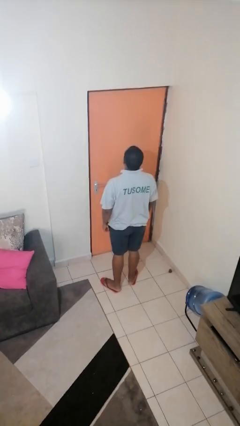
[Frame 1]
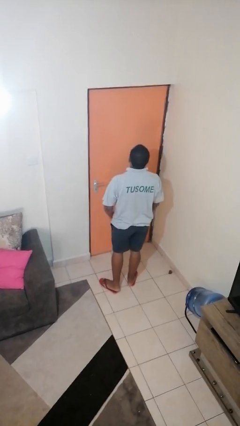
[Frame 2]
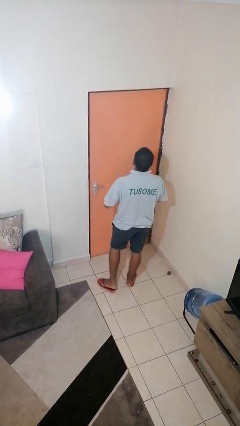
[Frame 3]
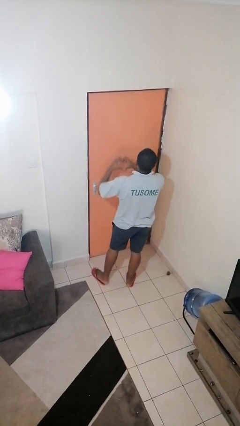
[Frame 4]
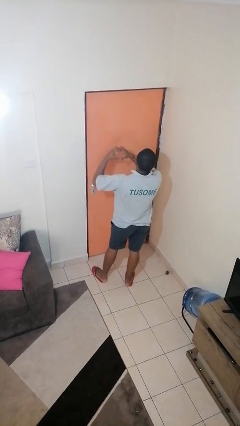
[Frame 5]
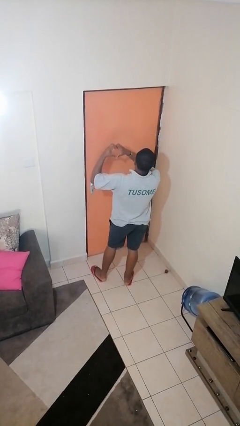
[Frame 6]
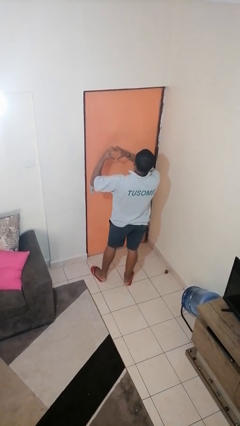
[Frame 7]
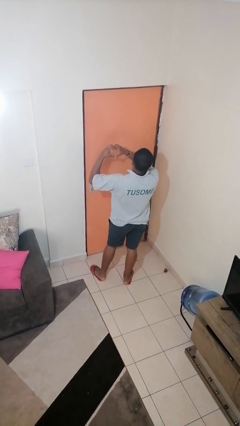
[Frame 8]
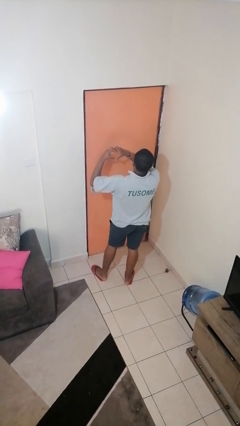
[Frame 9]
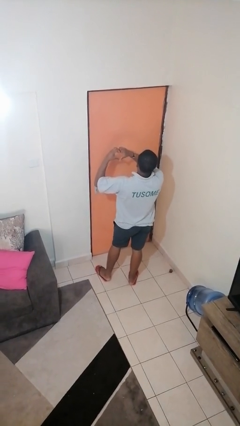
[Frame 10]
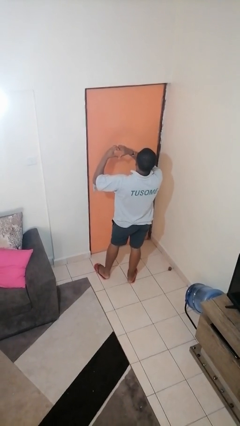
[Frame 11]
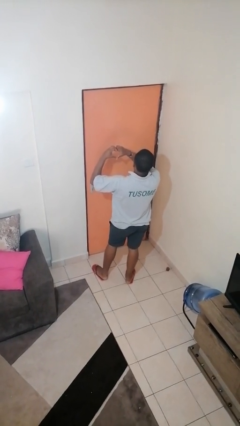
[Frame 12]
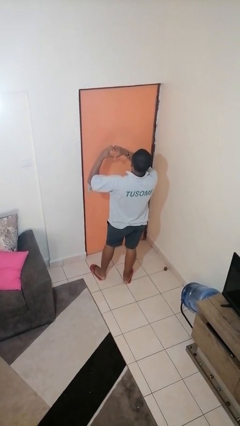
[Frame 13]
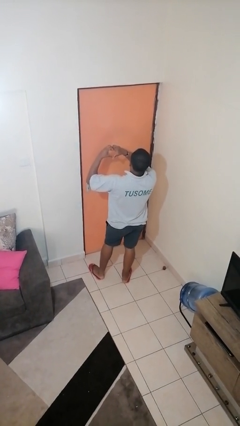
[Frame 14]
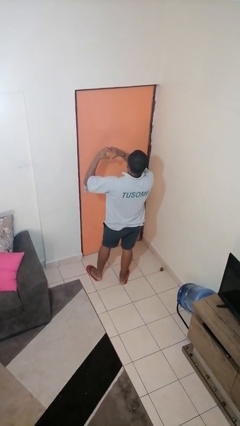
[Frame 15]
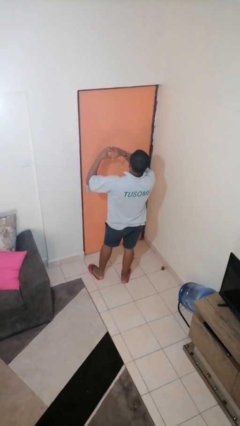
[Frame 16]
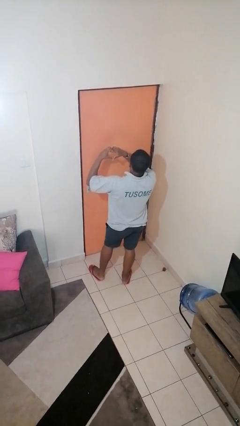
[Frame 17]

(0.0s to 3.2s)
person gestures heart

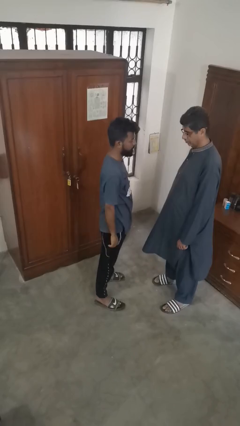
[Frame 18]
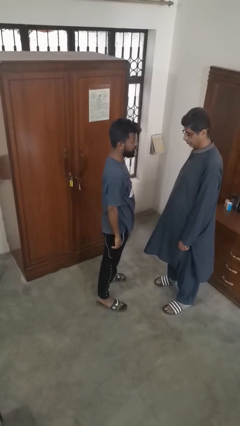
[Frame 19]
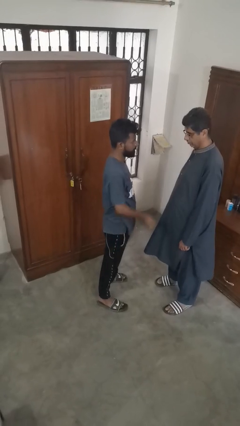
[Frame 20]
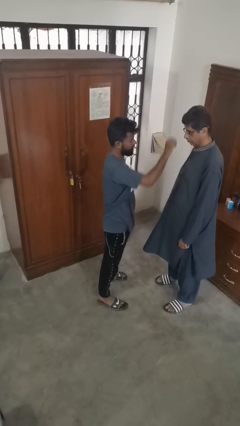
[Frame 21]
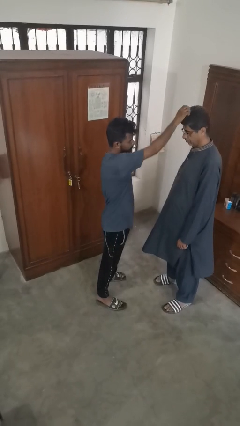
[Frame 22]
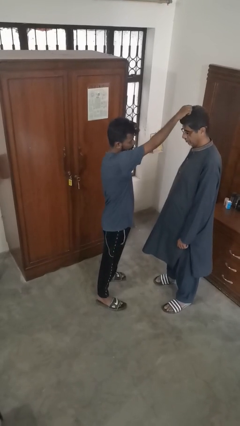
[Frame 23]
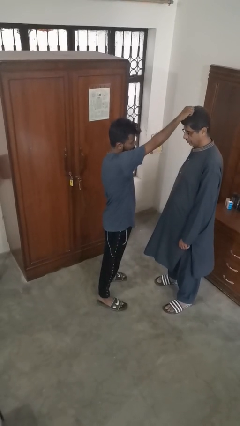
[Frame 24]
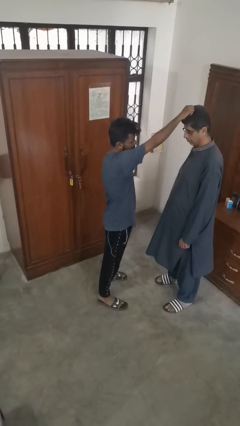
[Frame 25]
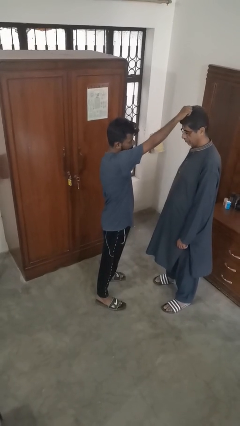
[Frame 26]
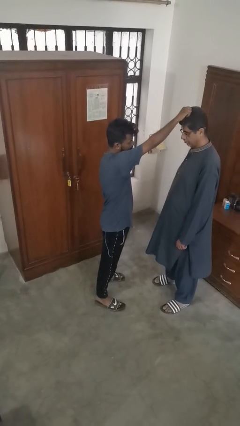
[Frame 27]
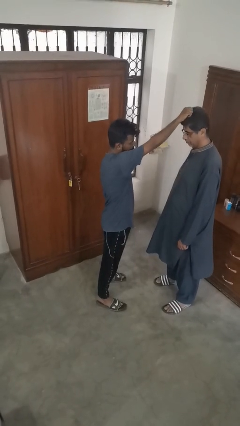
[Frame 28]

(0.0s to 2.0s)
person grabs person by hair

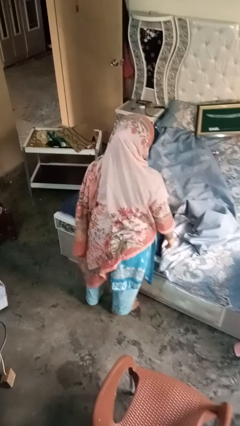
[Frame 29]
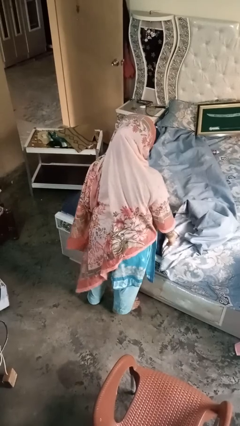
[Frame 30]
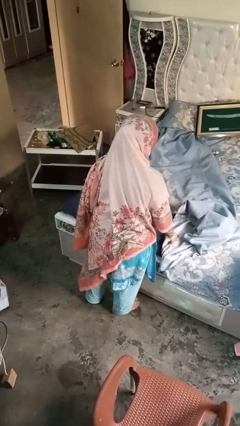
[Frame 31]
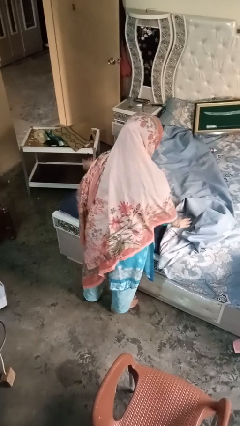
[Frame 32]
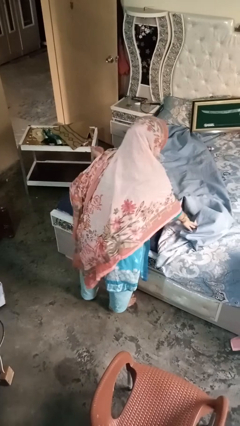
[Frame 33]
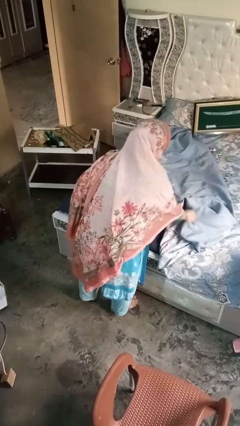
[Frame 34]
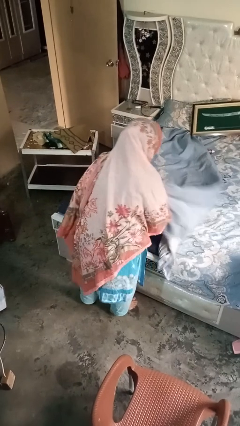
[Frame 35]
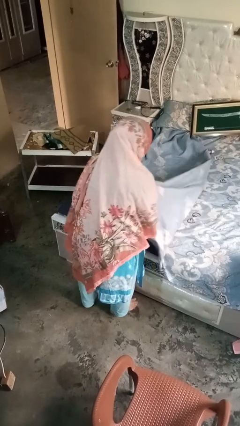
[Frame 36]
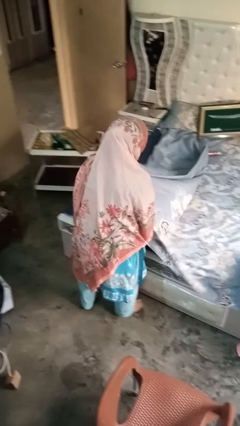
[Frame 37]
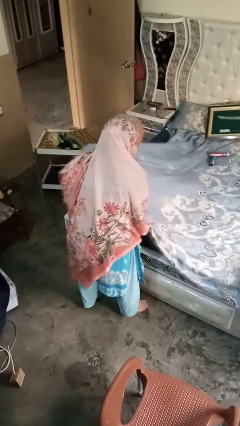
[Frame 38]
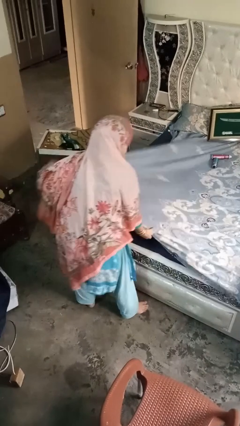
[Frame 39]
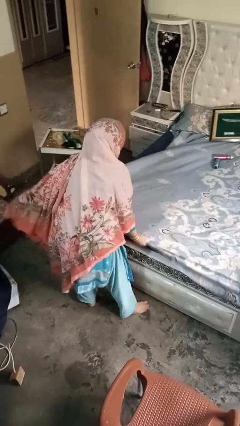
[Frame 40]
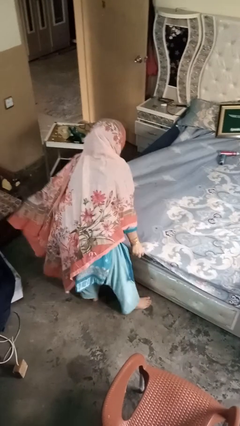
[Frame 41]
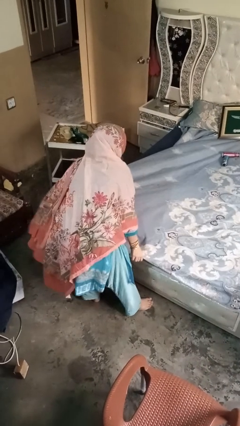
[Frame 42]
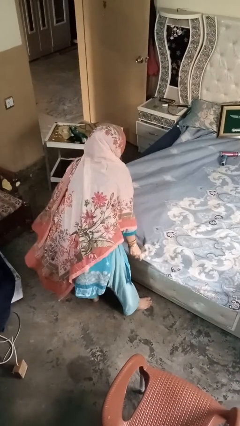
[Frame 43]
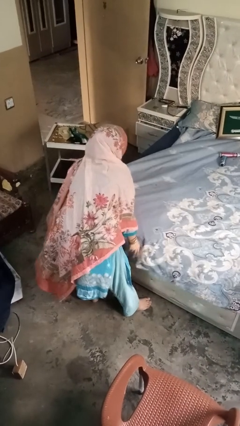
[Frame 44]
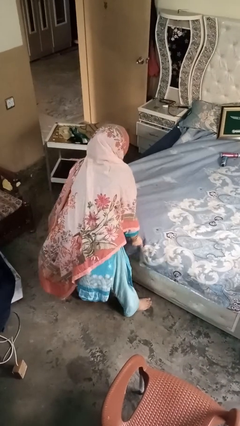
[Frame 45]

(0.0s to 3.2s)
person makes bed

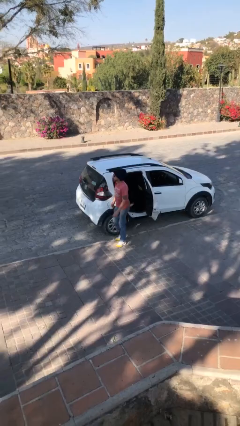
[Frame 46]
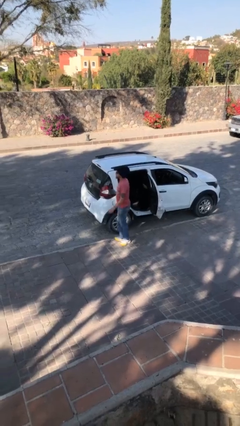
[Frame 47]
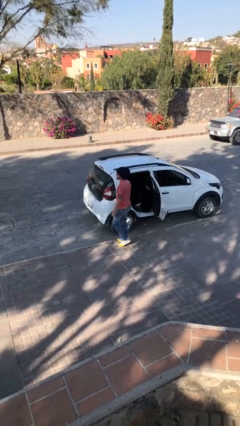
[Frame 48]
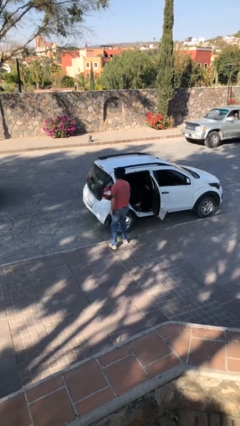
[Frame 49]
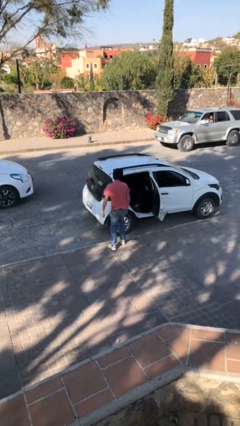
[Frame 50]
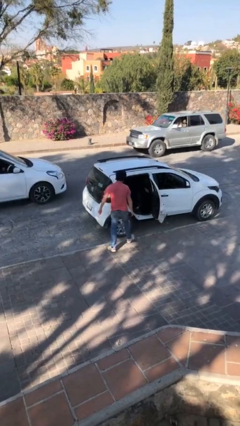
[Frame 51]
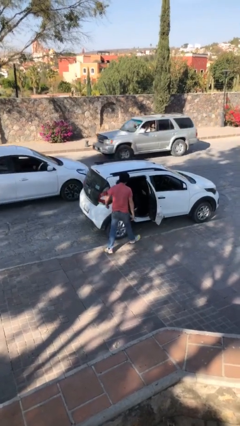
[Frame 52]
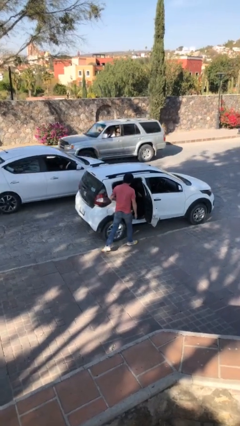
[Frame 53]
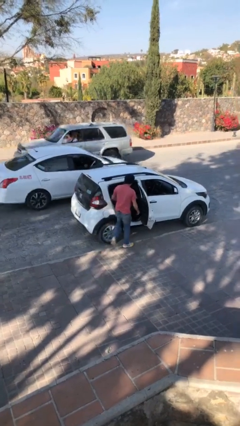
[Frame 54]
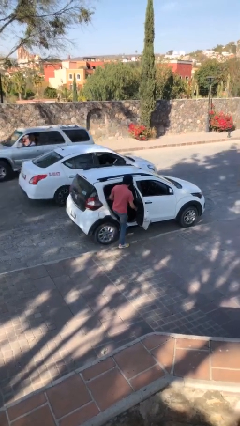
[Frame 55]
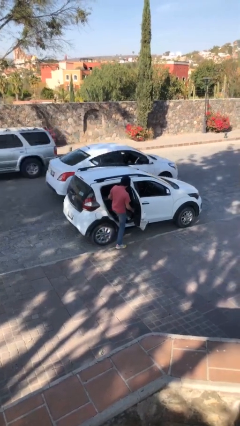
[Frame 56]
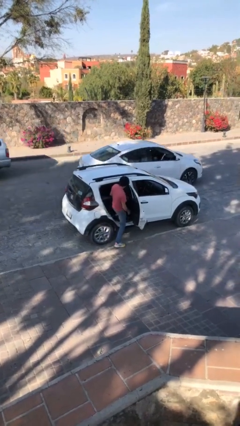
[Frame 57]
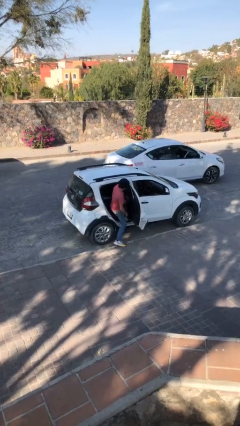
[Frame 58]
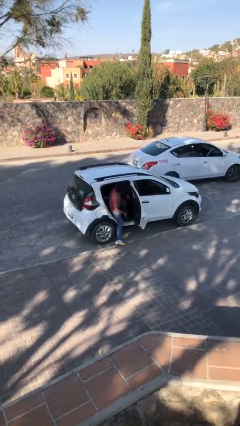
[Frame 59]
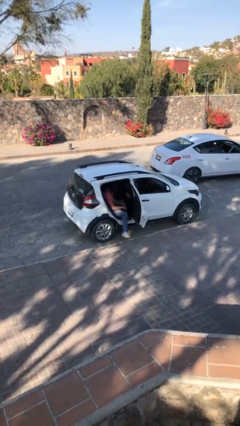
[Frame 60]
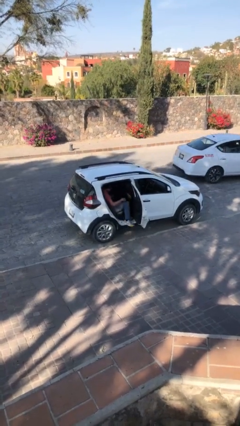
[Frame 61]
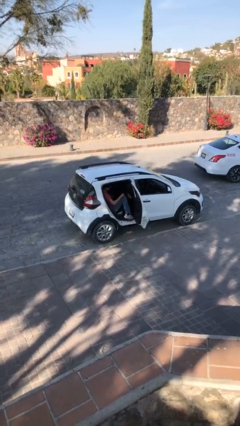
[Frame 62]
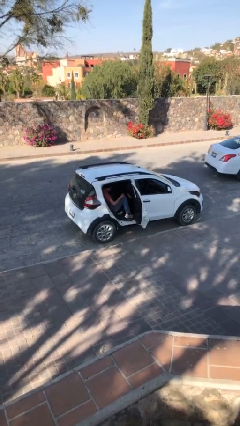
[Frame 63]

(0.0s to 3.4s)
person enters car

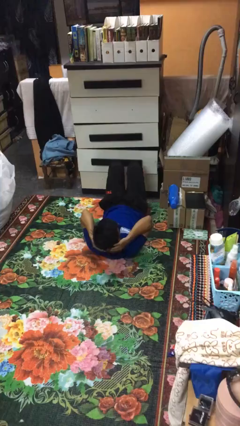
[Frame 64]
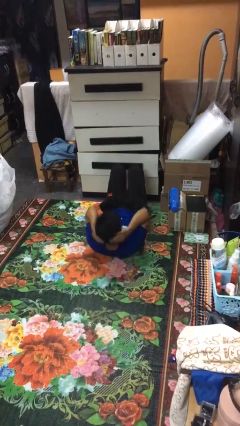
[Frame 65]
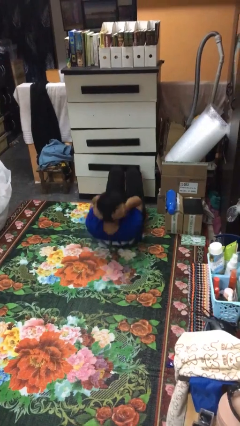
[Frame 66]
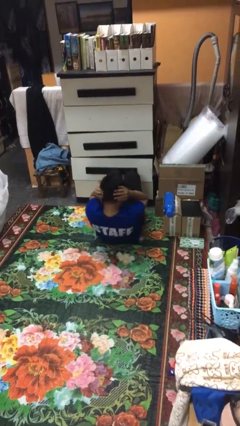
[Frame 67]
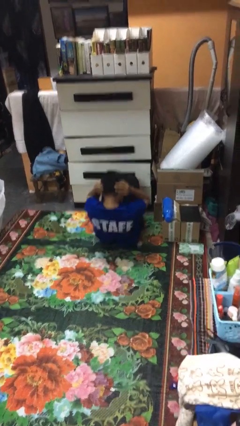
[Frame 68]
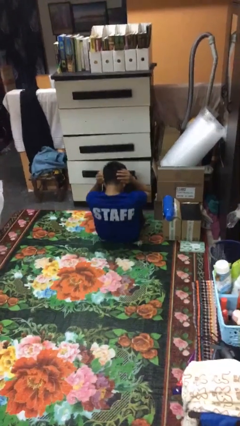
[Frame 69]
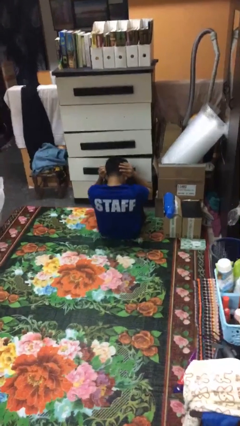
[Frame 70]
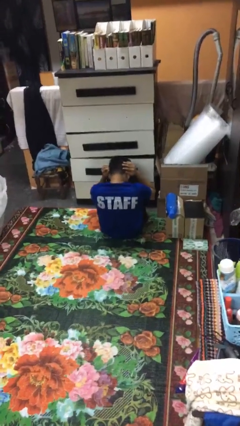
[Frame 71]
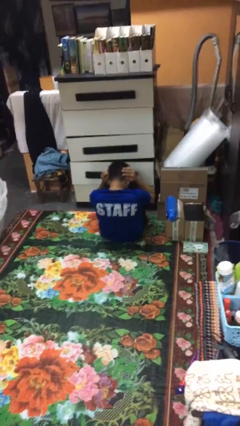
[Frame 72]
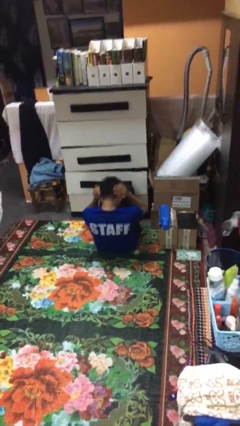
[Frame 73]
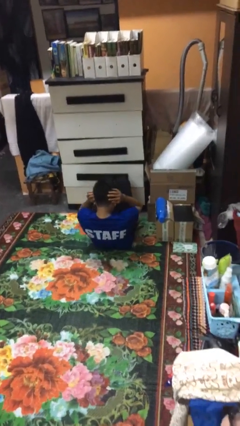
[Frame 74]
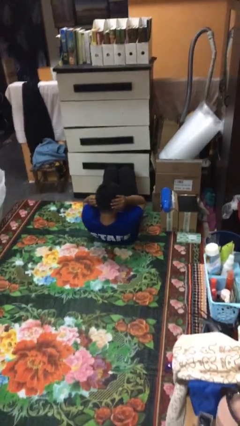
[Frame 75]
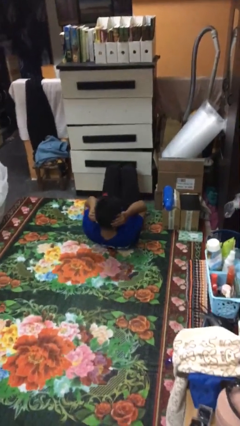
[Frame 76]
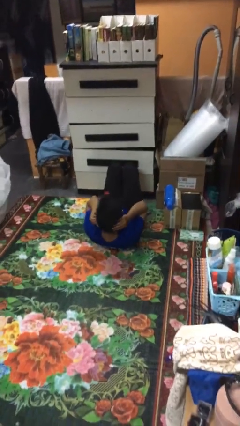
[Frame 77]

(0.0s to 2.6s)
person exercises with situp

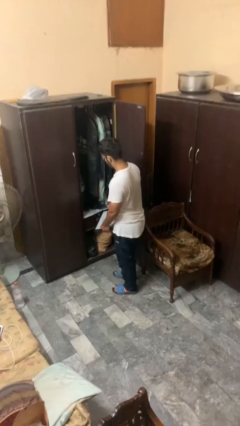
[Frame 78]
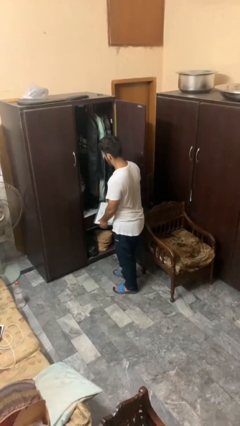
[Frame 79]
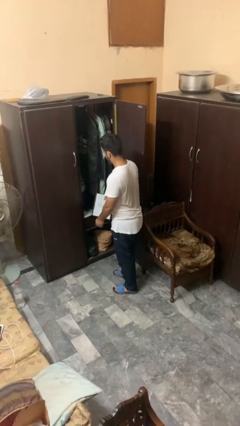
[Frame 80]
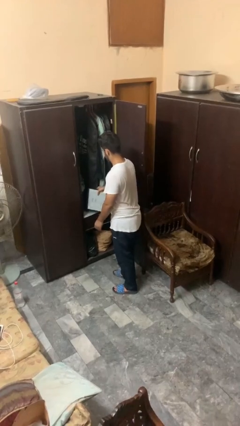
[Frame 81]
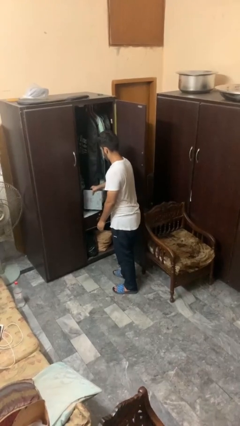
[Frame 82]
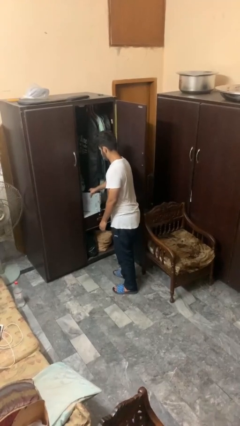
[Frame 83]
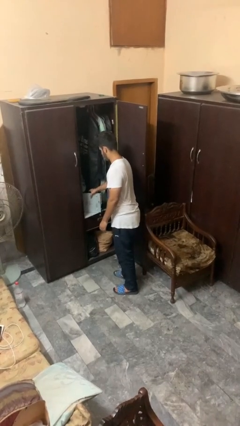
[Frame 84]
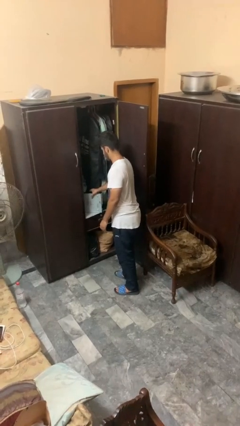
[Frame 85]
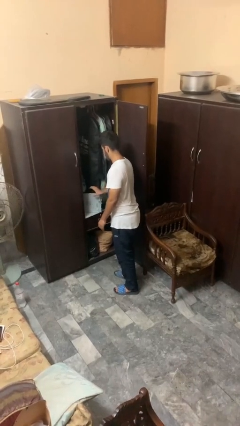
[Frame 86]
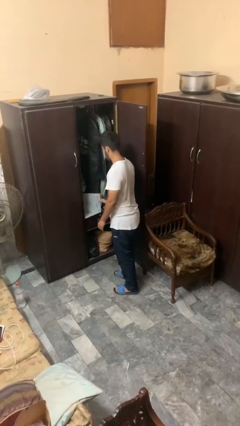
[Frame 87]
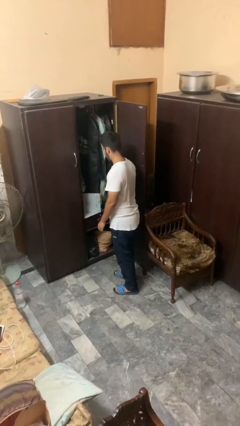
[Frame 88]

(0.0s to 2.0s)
person puts down object on countertop

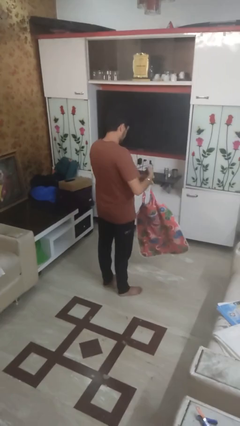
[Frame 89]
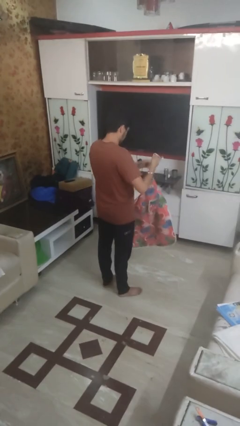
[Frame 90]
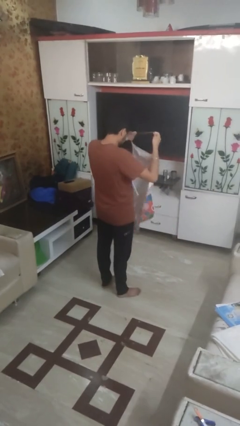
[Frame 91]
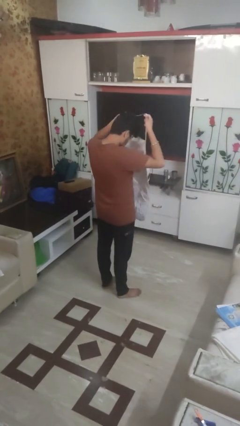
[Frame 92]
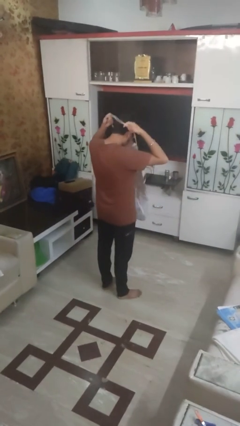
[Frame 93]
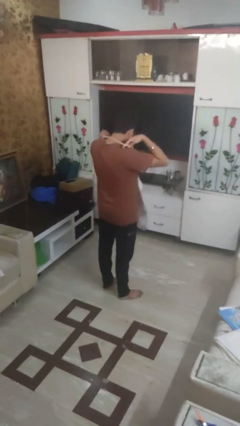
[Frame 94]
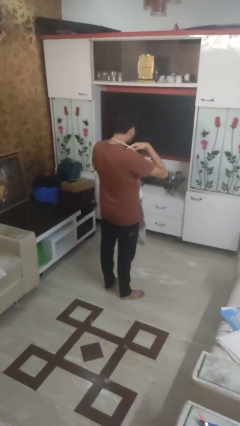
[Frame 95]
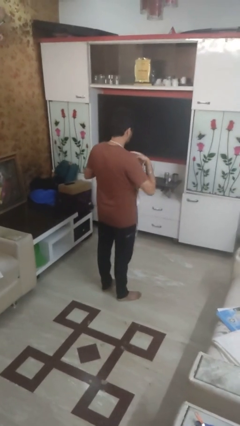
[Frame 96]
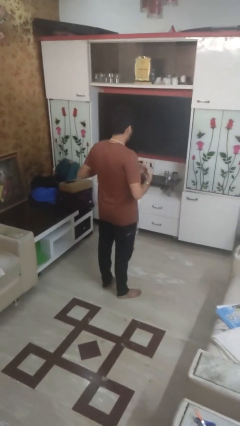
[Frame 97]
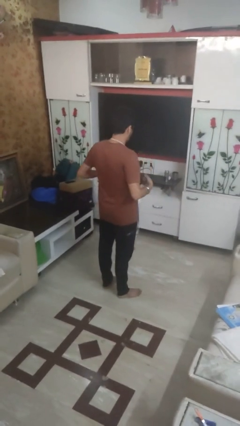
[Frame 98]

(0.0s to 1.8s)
person puts on apron
